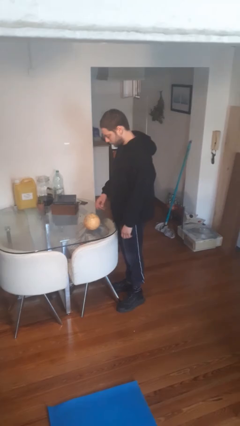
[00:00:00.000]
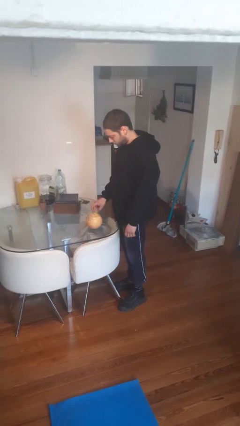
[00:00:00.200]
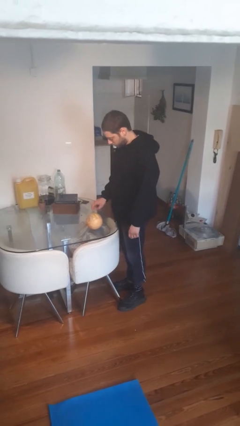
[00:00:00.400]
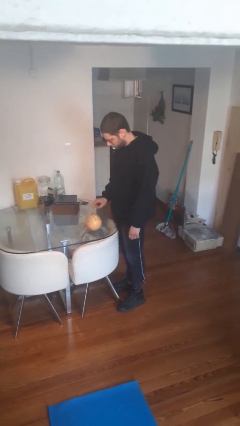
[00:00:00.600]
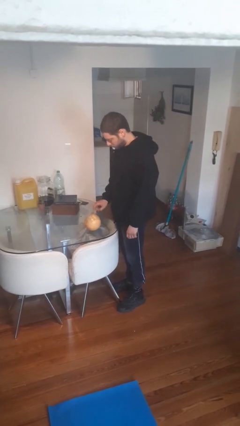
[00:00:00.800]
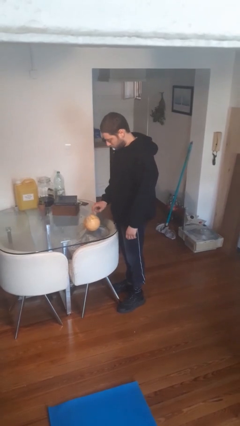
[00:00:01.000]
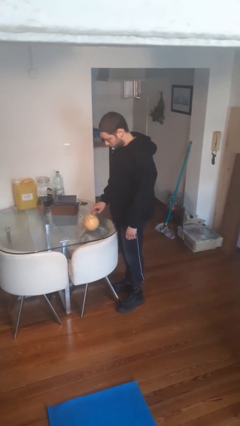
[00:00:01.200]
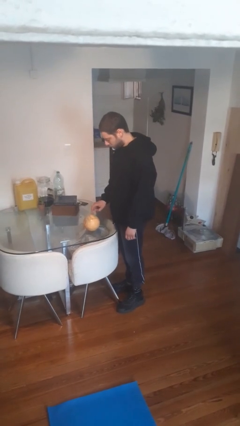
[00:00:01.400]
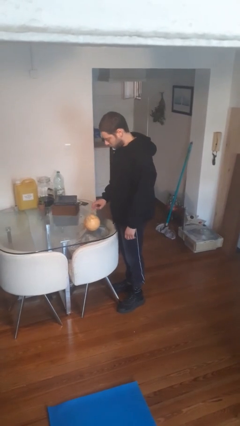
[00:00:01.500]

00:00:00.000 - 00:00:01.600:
person taps object with finger

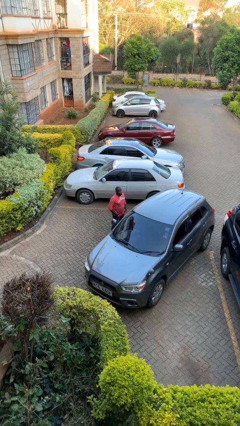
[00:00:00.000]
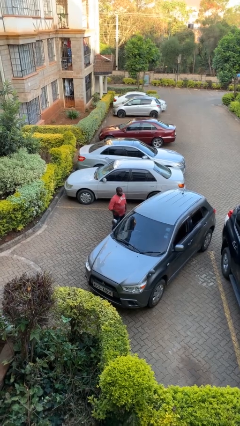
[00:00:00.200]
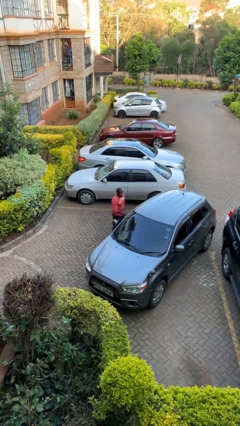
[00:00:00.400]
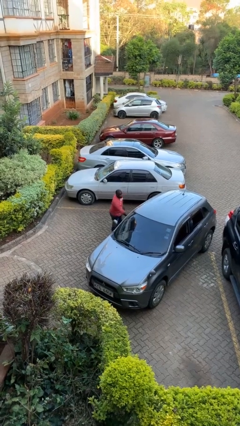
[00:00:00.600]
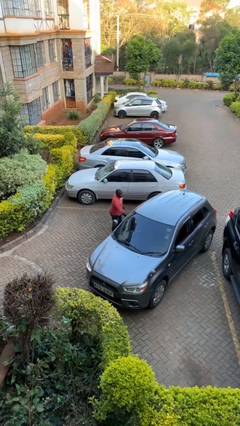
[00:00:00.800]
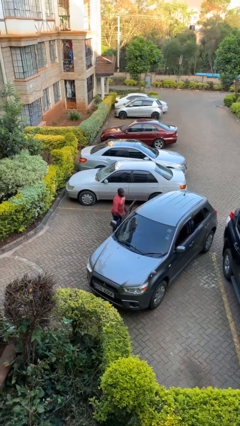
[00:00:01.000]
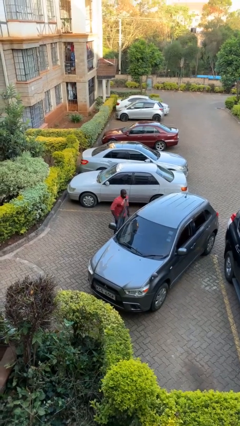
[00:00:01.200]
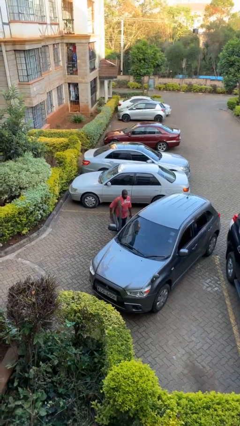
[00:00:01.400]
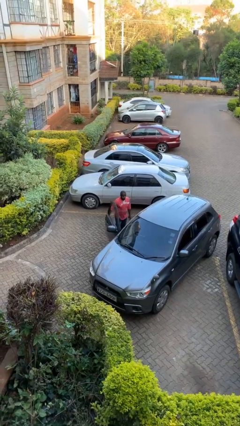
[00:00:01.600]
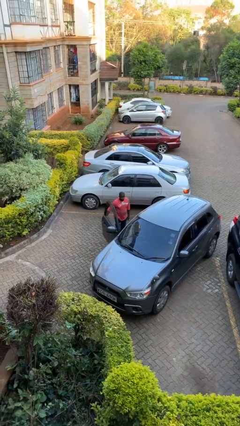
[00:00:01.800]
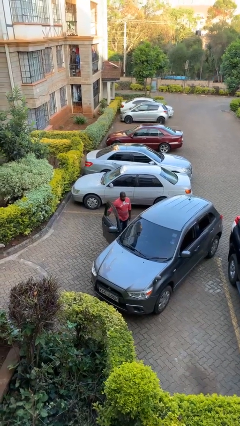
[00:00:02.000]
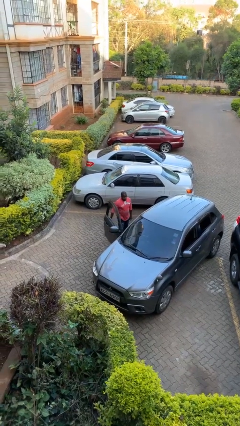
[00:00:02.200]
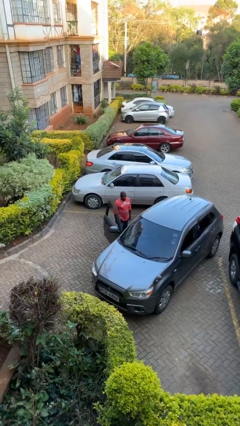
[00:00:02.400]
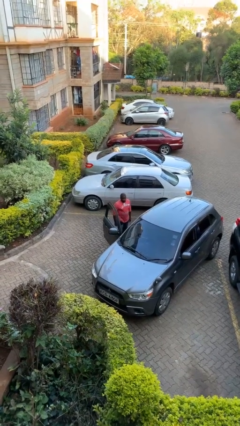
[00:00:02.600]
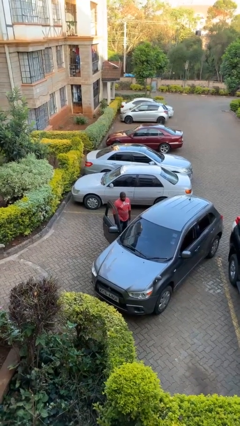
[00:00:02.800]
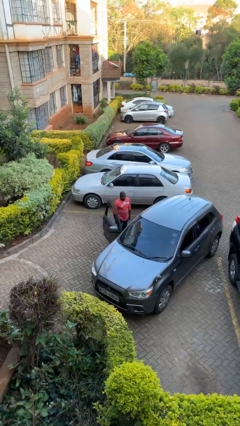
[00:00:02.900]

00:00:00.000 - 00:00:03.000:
person opens car door

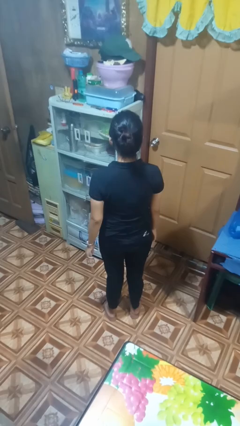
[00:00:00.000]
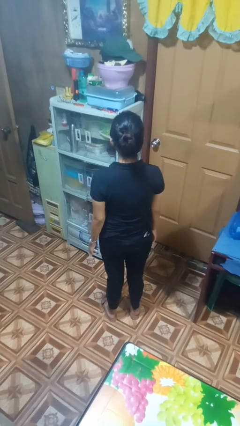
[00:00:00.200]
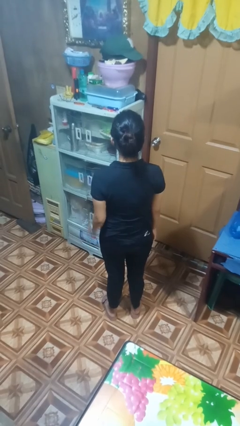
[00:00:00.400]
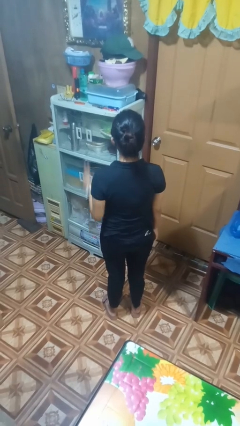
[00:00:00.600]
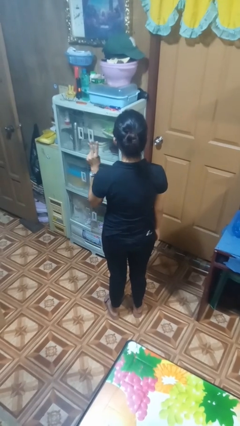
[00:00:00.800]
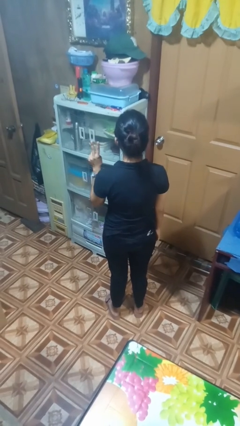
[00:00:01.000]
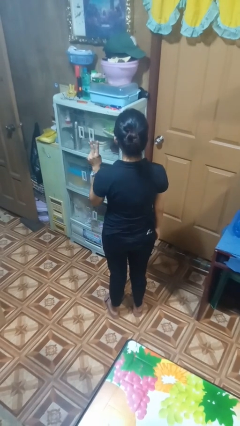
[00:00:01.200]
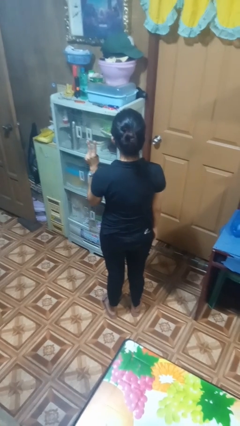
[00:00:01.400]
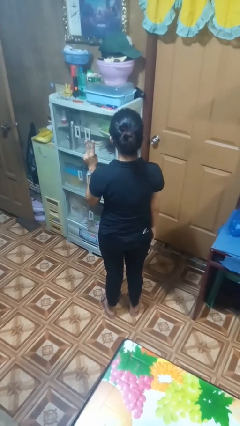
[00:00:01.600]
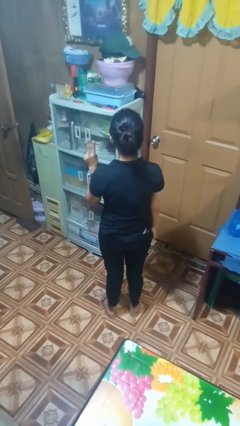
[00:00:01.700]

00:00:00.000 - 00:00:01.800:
person gestures peace

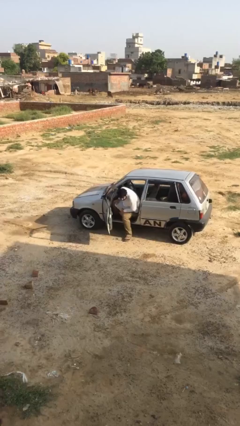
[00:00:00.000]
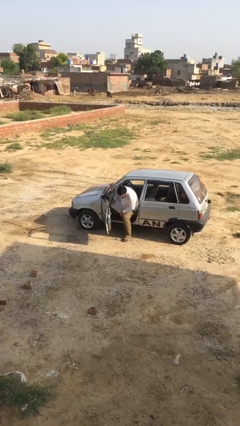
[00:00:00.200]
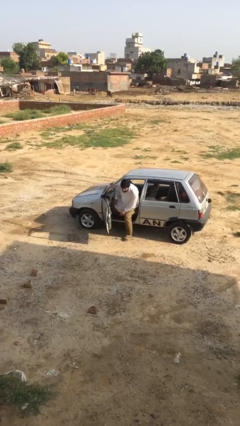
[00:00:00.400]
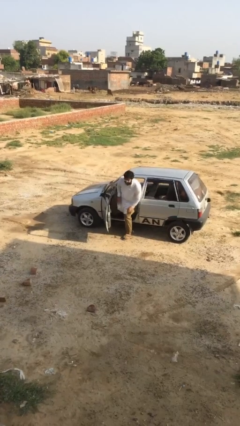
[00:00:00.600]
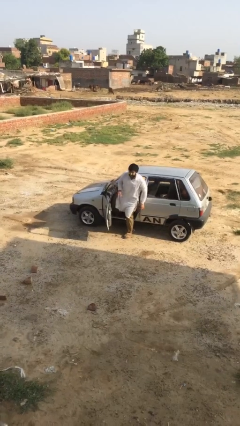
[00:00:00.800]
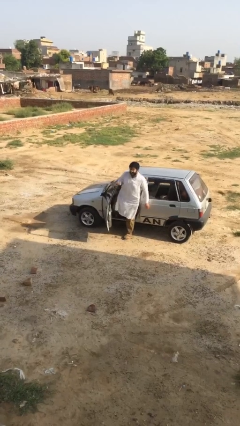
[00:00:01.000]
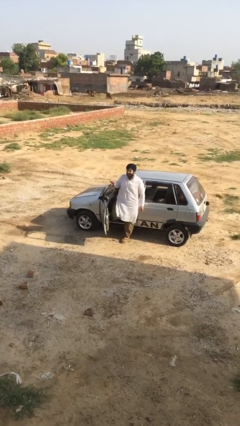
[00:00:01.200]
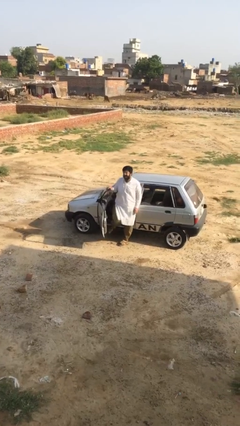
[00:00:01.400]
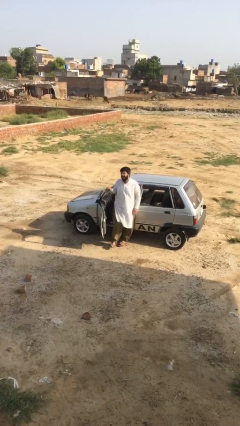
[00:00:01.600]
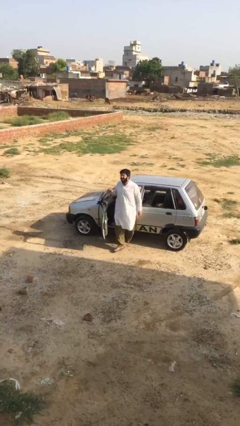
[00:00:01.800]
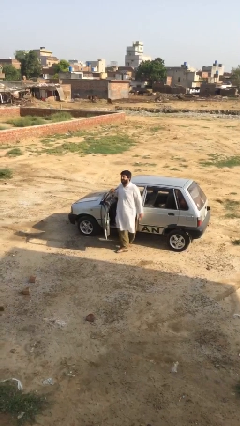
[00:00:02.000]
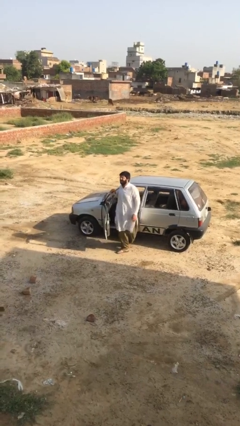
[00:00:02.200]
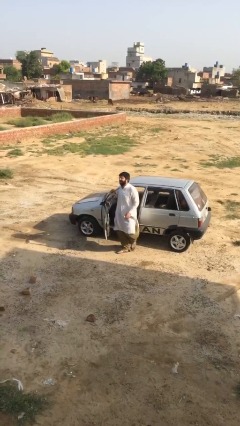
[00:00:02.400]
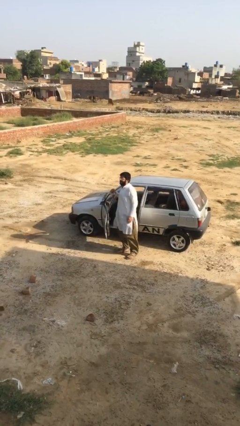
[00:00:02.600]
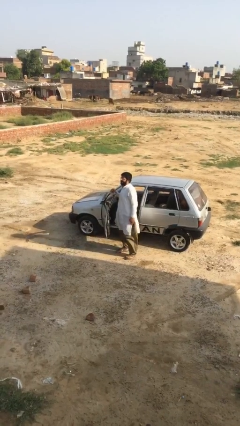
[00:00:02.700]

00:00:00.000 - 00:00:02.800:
person exits car

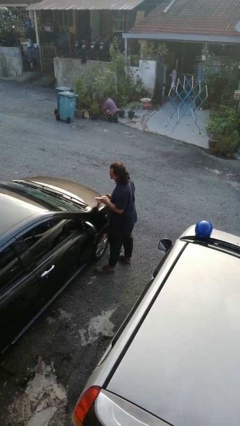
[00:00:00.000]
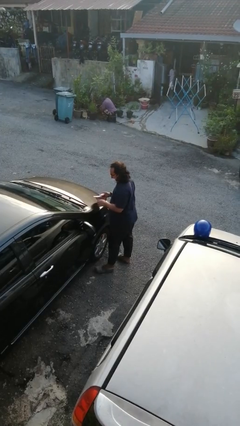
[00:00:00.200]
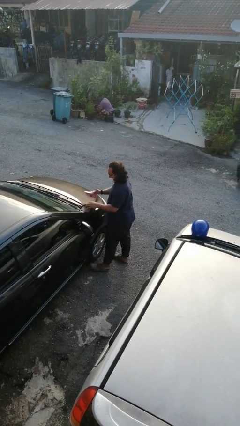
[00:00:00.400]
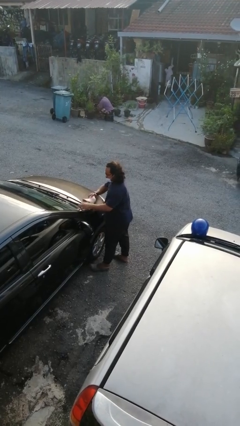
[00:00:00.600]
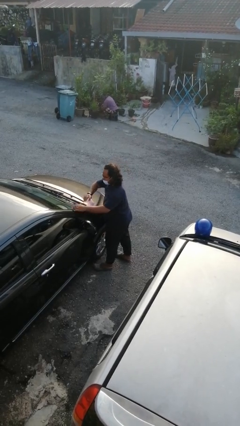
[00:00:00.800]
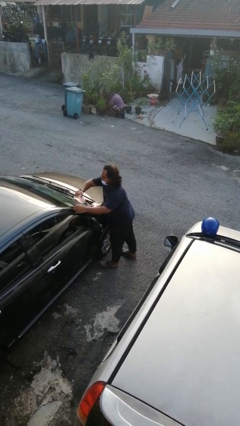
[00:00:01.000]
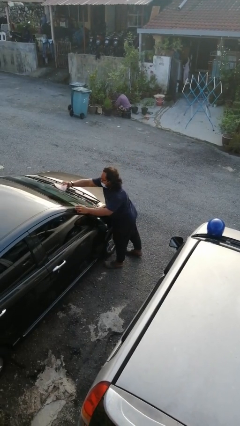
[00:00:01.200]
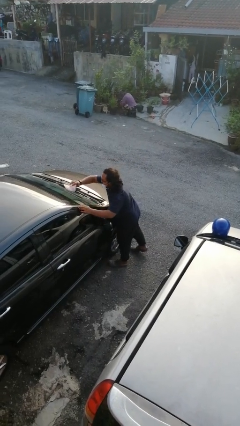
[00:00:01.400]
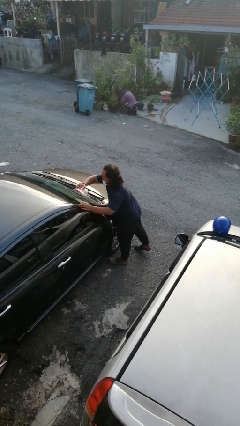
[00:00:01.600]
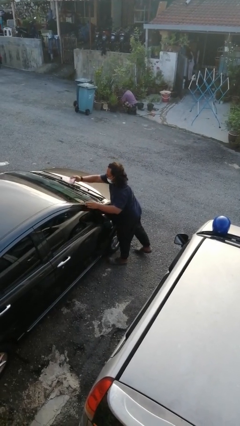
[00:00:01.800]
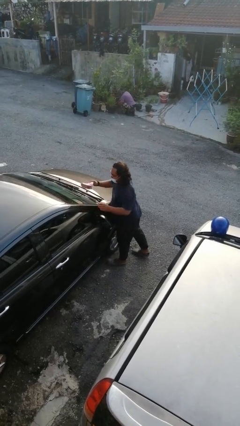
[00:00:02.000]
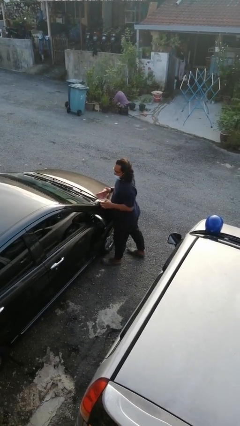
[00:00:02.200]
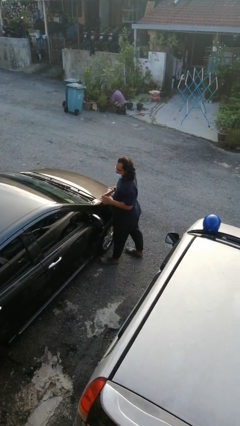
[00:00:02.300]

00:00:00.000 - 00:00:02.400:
person polishes car with rag

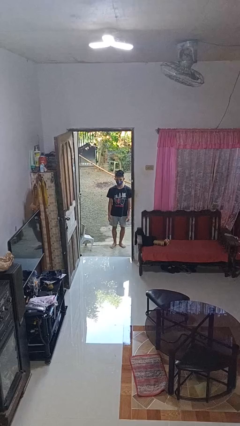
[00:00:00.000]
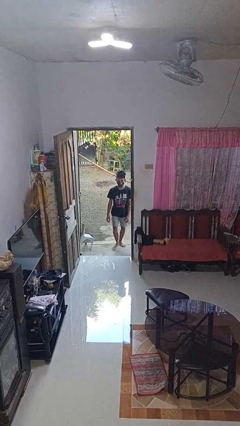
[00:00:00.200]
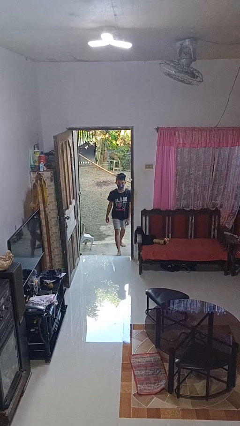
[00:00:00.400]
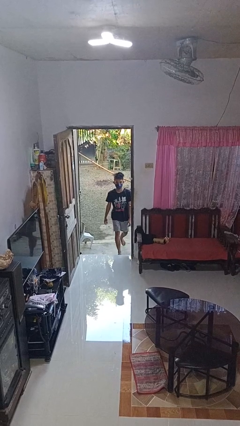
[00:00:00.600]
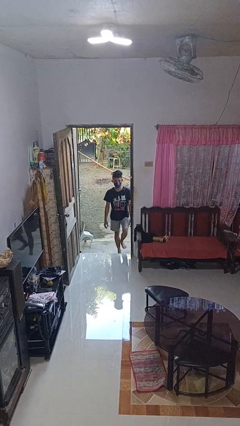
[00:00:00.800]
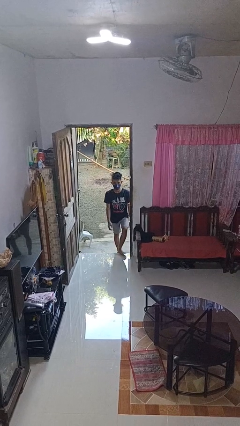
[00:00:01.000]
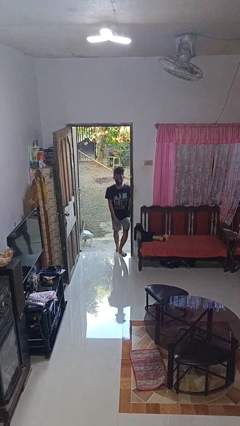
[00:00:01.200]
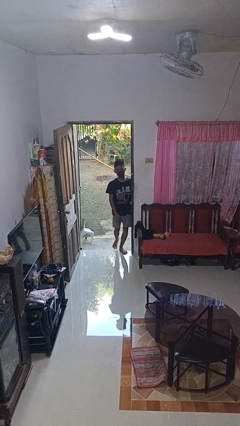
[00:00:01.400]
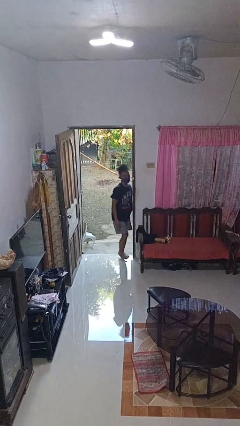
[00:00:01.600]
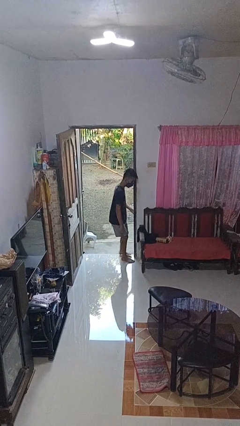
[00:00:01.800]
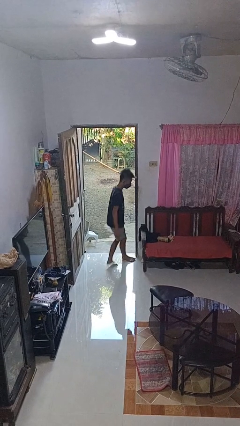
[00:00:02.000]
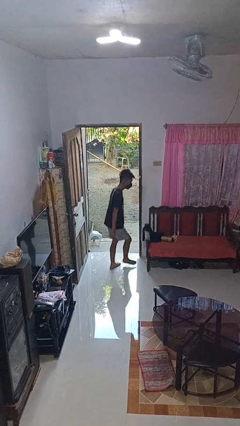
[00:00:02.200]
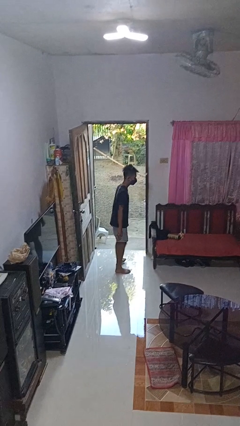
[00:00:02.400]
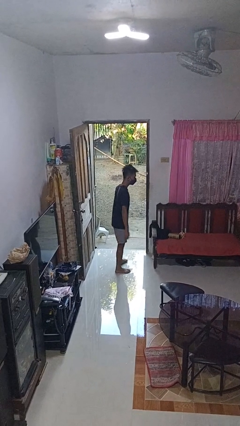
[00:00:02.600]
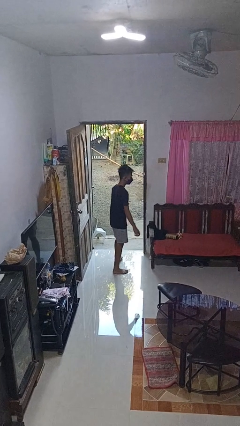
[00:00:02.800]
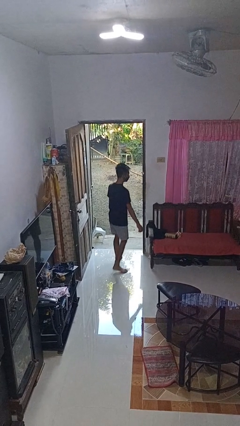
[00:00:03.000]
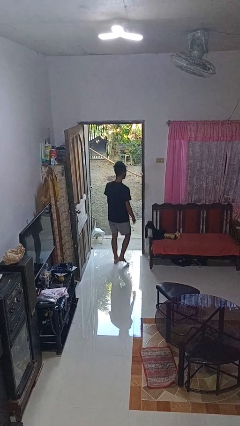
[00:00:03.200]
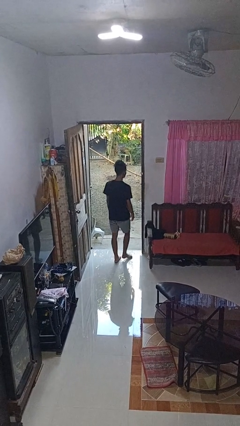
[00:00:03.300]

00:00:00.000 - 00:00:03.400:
person bumps into wall

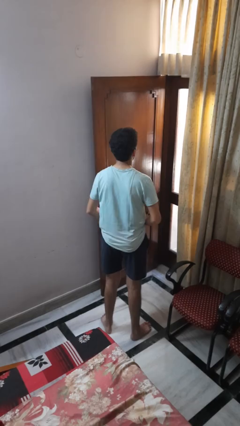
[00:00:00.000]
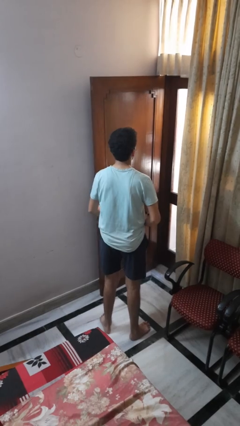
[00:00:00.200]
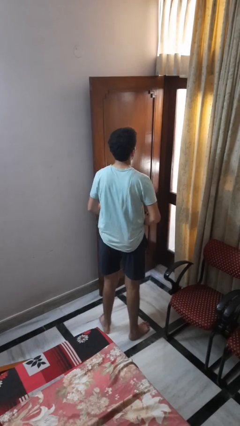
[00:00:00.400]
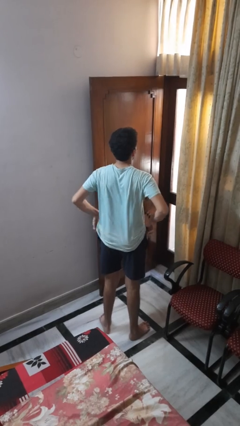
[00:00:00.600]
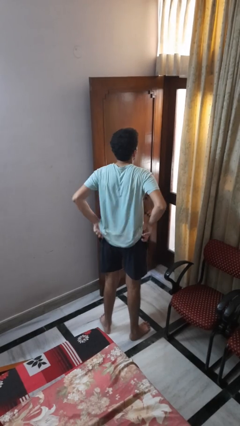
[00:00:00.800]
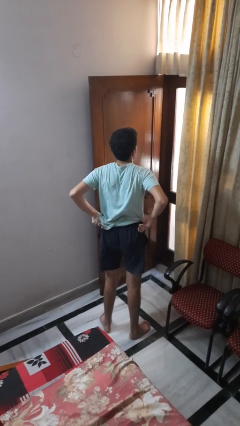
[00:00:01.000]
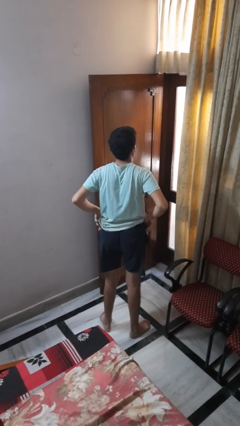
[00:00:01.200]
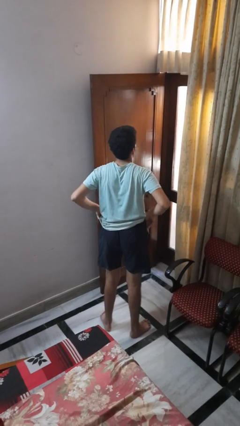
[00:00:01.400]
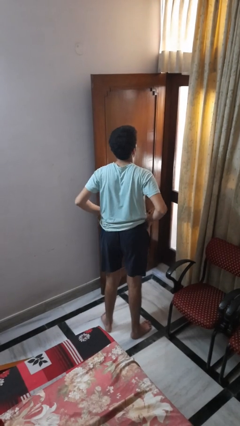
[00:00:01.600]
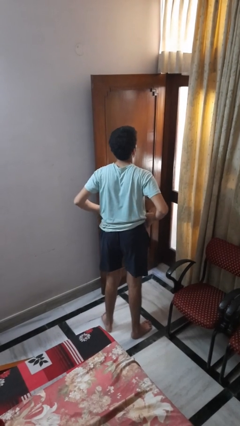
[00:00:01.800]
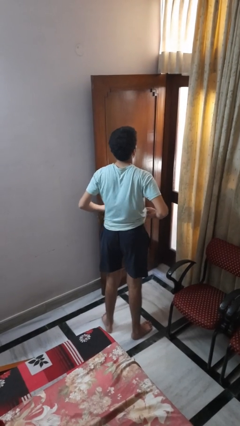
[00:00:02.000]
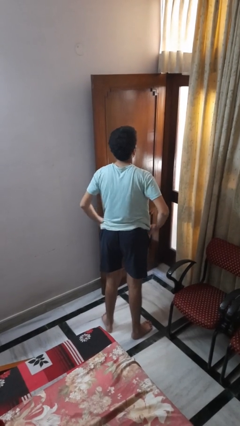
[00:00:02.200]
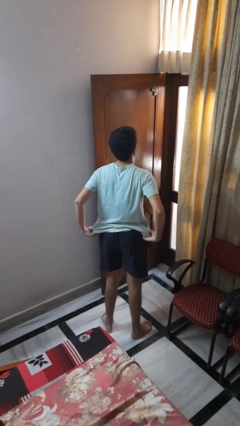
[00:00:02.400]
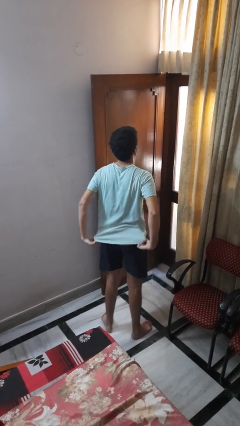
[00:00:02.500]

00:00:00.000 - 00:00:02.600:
person hikes up pants
